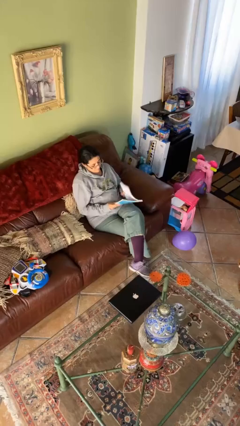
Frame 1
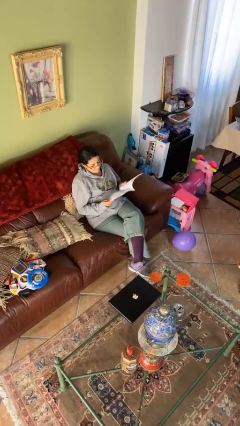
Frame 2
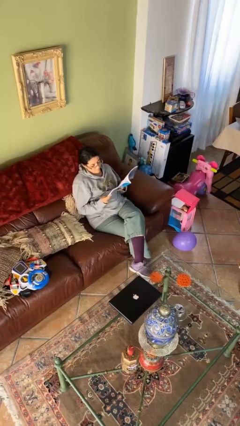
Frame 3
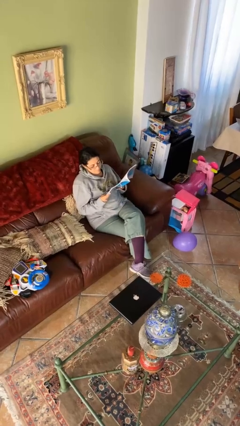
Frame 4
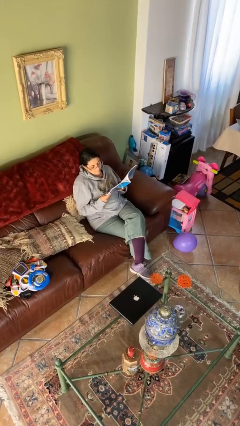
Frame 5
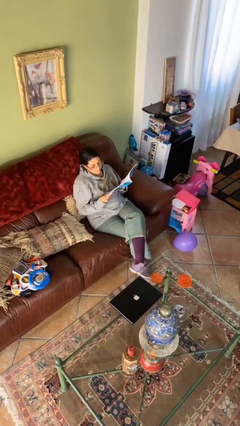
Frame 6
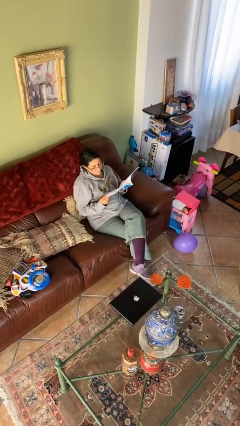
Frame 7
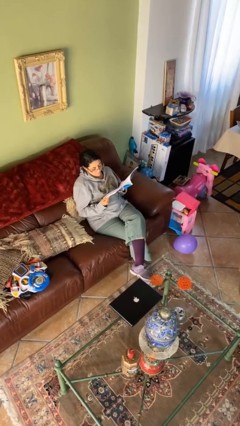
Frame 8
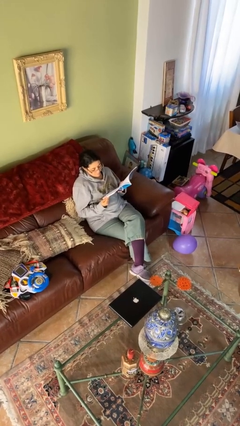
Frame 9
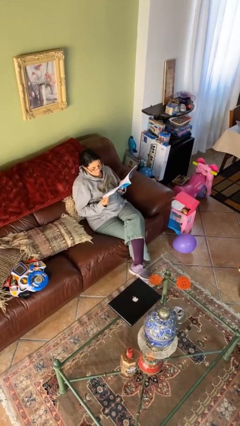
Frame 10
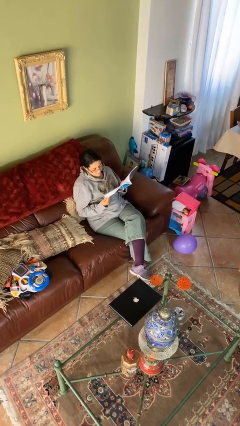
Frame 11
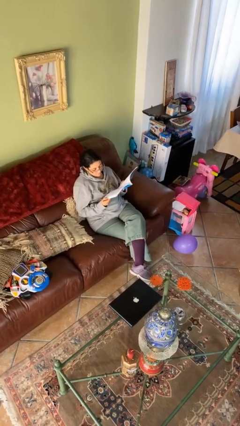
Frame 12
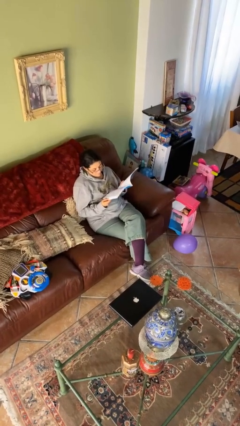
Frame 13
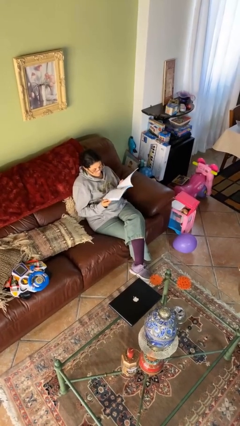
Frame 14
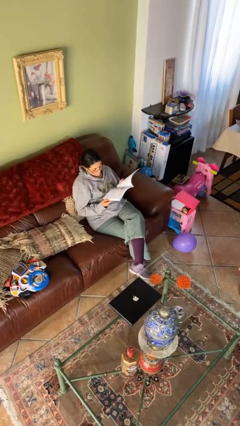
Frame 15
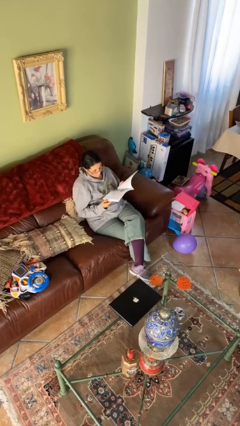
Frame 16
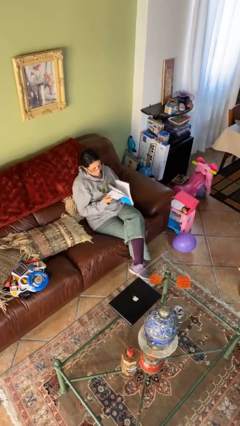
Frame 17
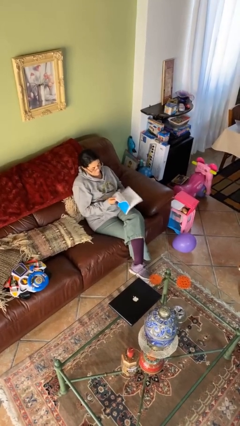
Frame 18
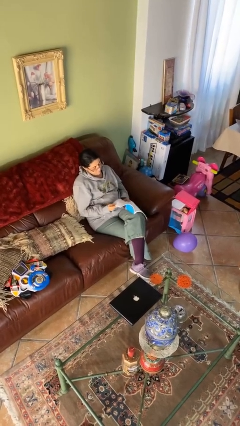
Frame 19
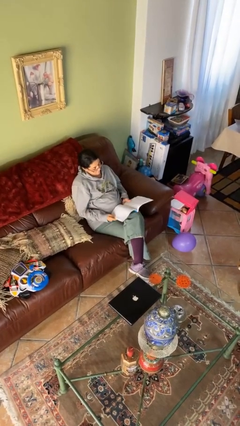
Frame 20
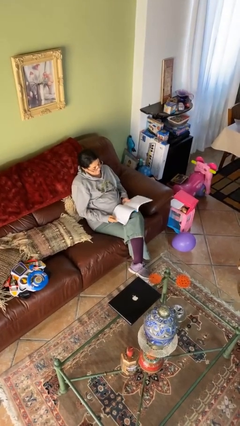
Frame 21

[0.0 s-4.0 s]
person reads document

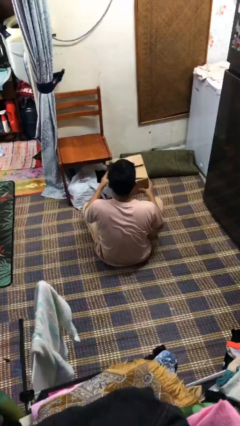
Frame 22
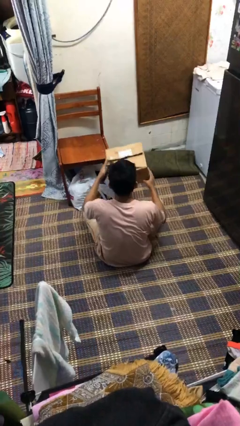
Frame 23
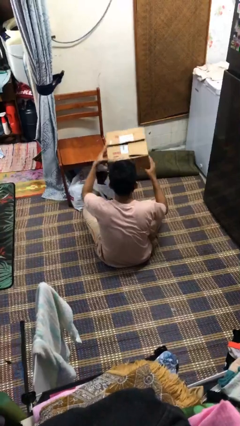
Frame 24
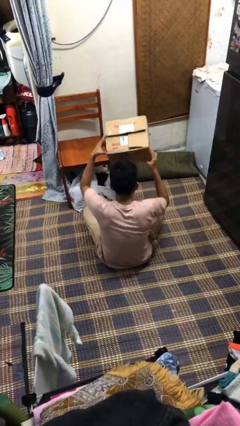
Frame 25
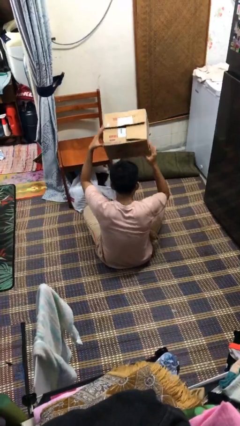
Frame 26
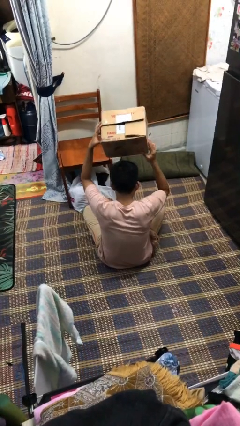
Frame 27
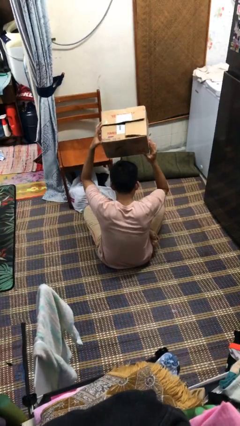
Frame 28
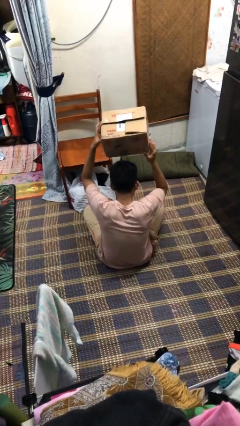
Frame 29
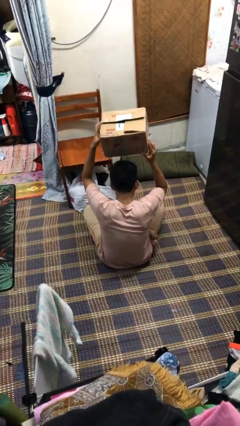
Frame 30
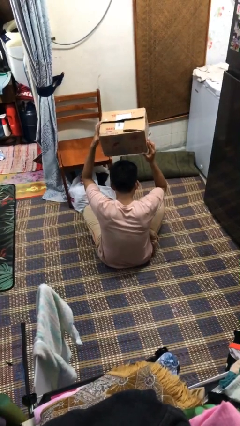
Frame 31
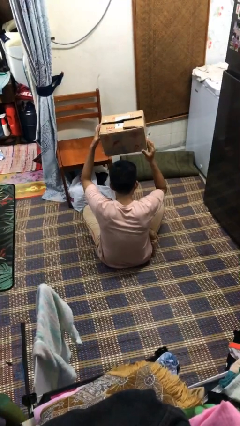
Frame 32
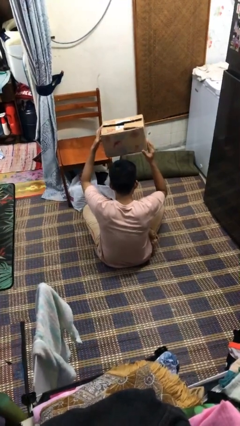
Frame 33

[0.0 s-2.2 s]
person holds object above head

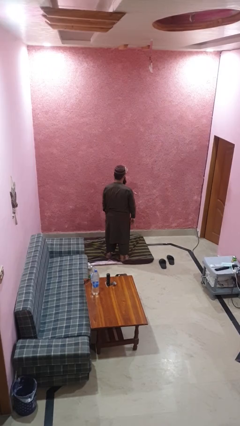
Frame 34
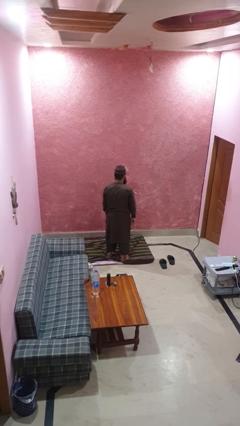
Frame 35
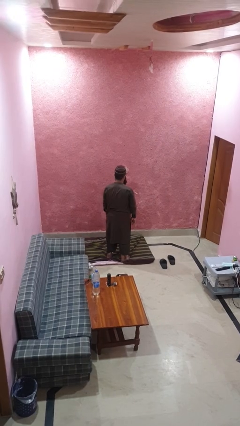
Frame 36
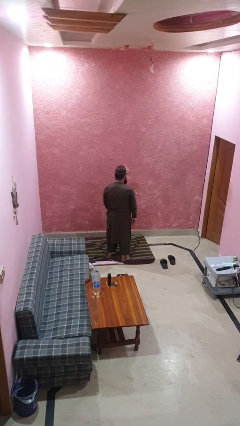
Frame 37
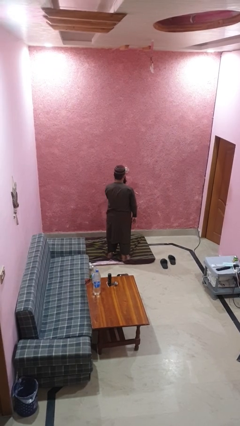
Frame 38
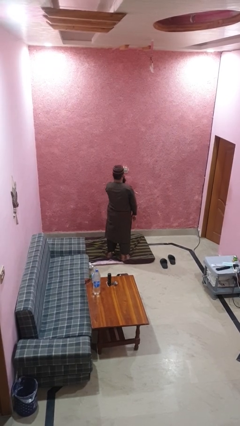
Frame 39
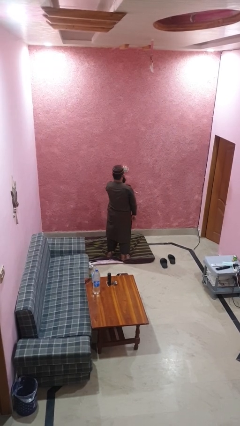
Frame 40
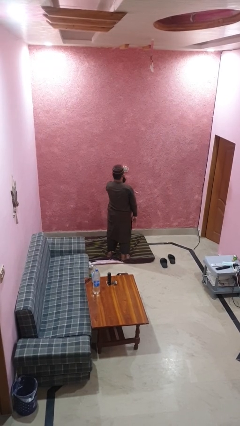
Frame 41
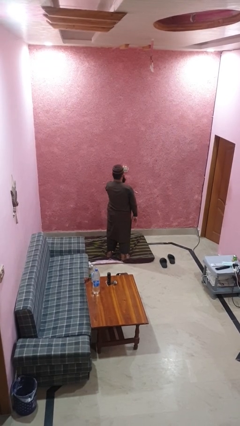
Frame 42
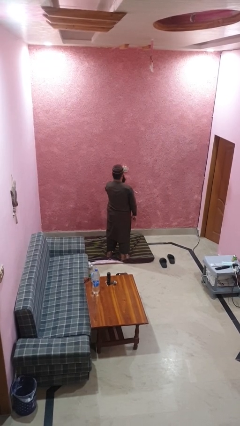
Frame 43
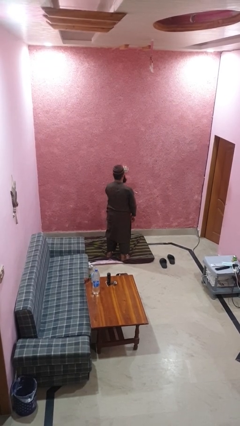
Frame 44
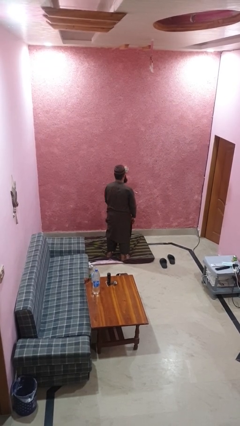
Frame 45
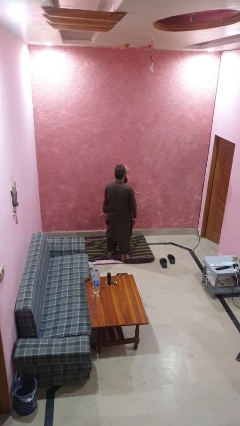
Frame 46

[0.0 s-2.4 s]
person drums on chest

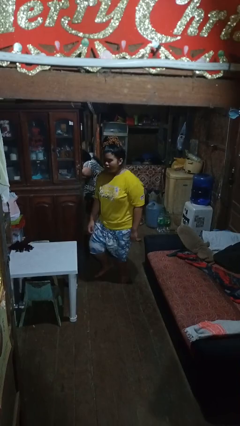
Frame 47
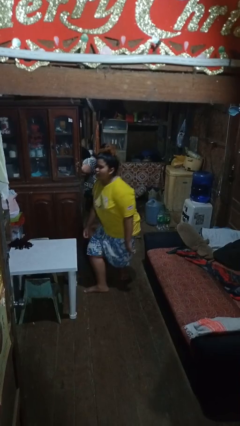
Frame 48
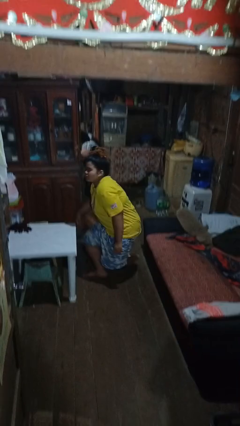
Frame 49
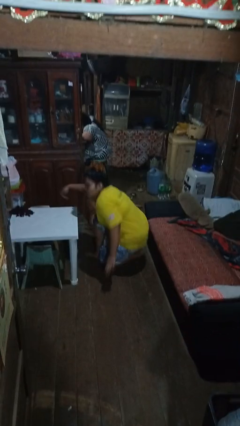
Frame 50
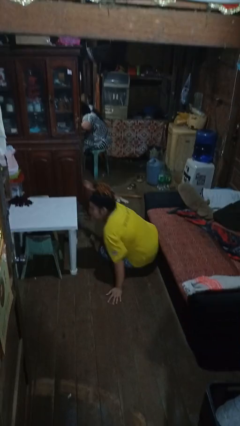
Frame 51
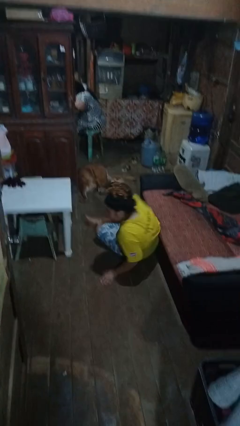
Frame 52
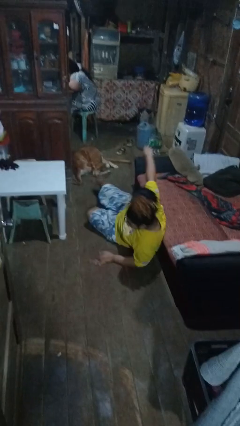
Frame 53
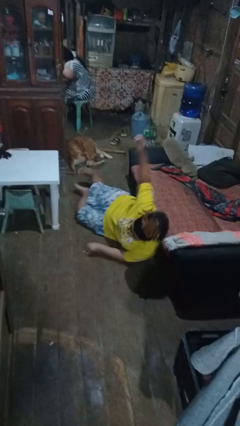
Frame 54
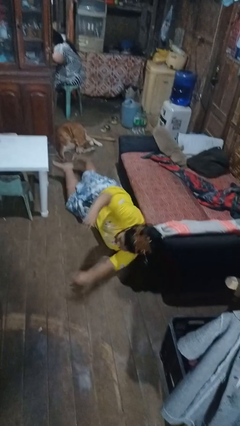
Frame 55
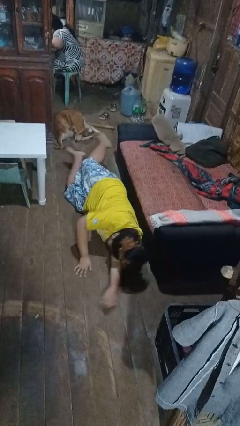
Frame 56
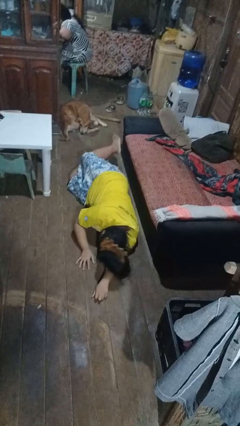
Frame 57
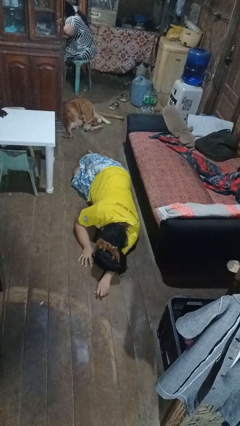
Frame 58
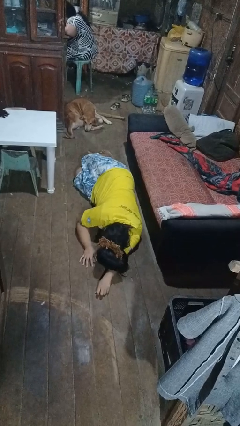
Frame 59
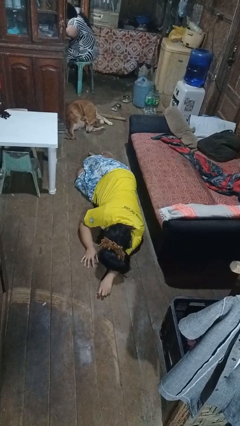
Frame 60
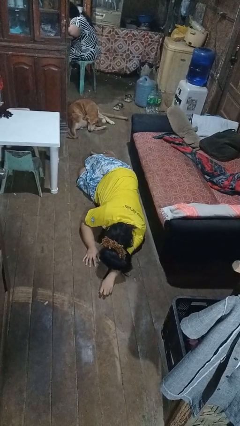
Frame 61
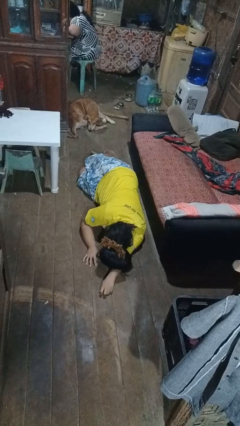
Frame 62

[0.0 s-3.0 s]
person falls while standing

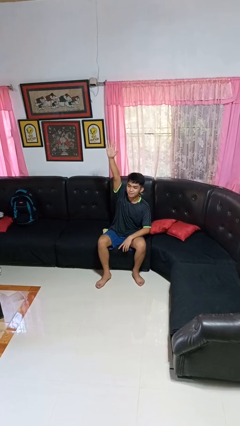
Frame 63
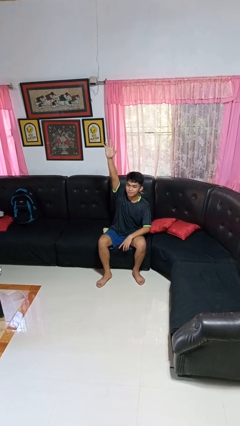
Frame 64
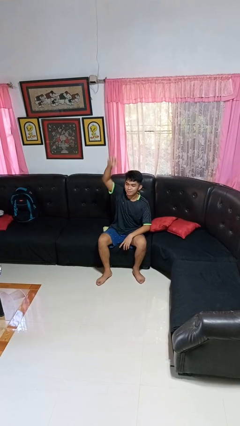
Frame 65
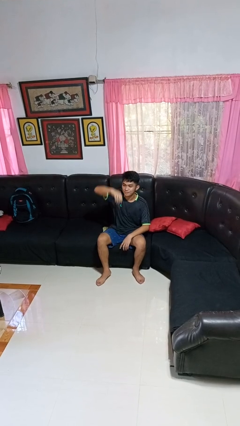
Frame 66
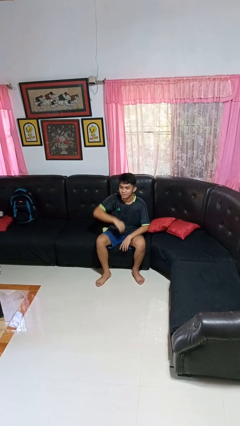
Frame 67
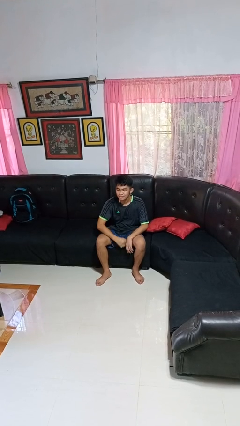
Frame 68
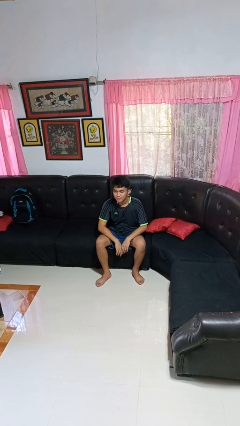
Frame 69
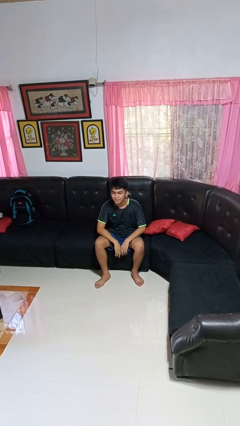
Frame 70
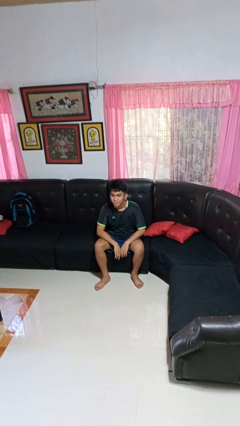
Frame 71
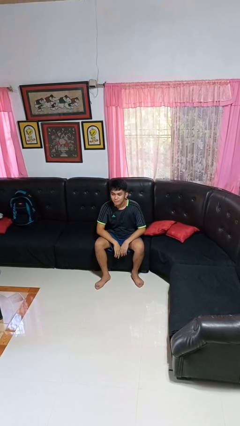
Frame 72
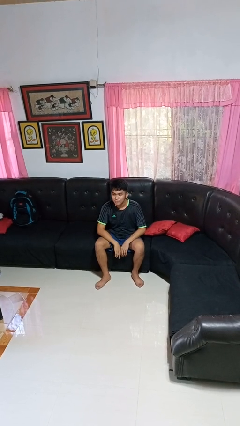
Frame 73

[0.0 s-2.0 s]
person gestures lower hand

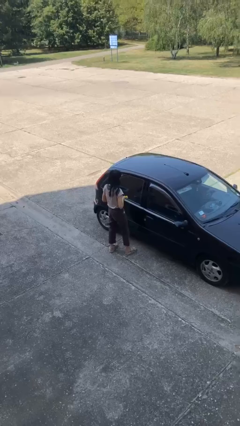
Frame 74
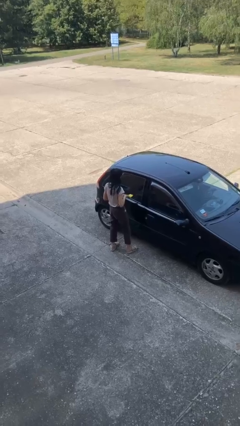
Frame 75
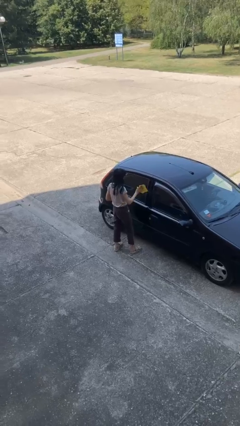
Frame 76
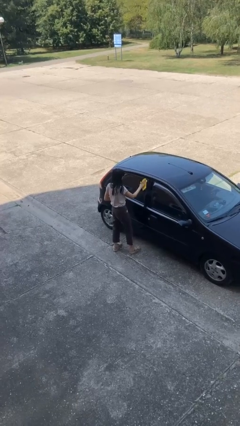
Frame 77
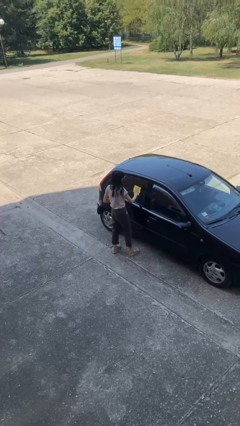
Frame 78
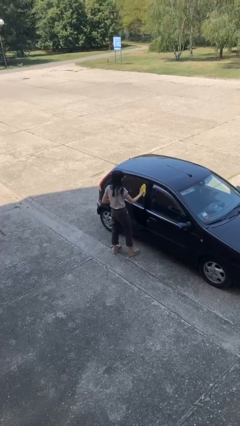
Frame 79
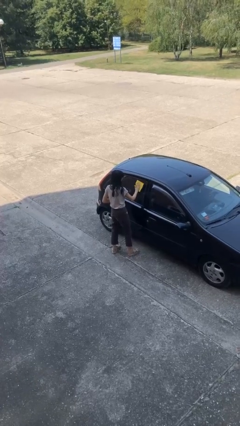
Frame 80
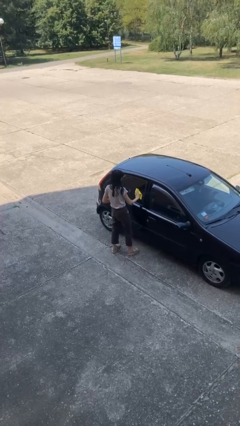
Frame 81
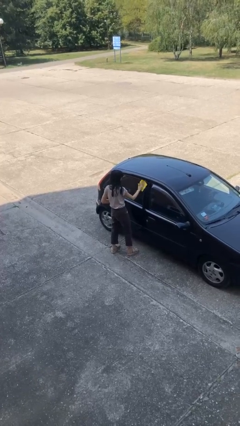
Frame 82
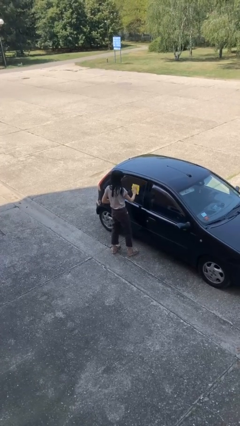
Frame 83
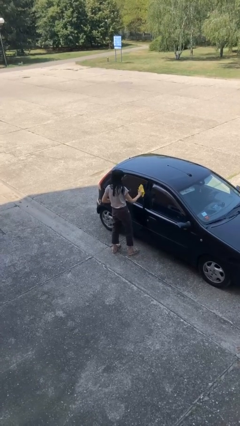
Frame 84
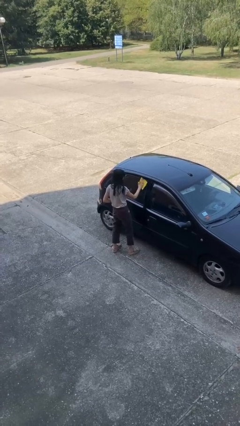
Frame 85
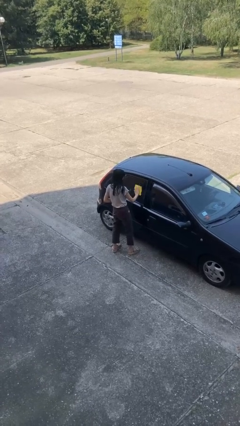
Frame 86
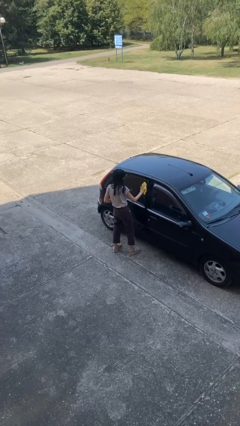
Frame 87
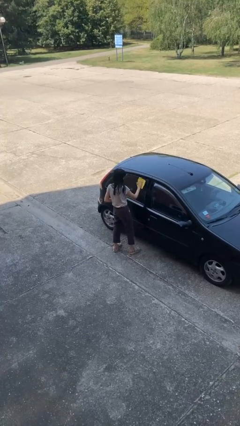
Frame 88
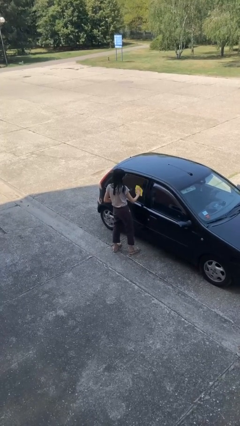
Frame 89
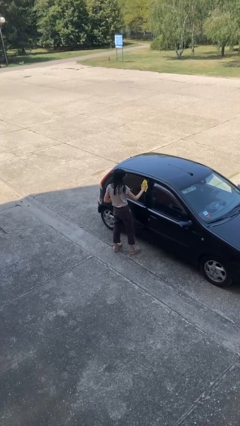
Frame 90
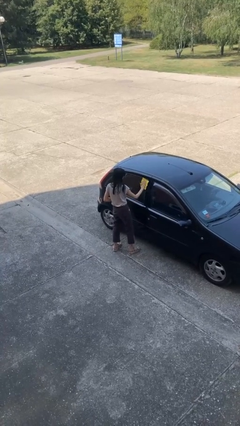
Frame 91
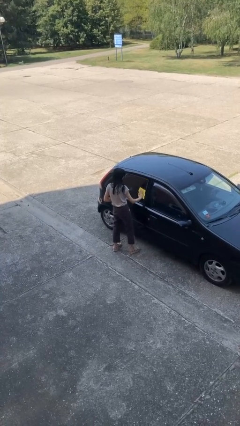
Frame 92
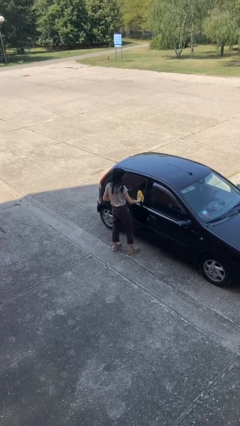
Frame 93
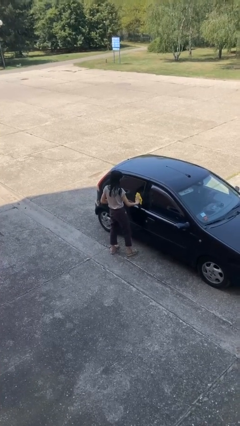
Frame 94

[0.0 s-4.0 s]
person polishes car with rag
